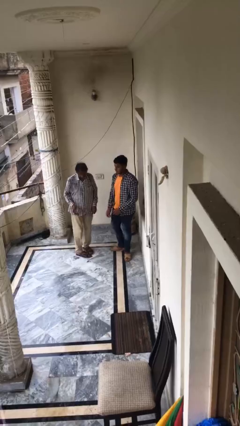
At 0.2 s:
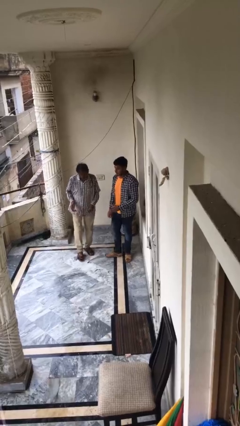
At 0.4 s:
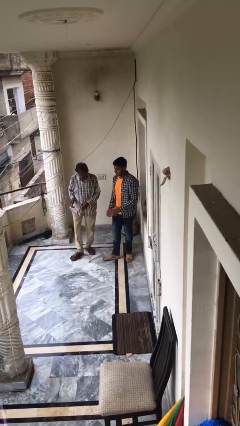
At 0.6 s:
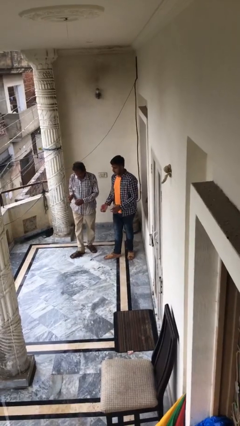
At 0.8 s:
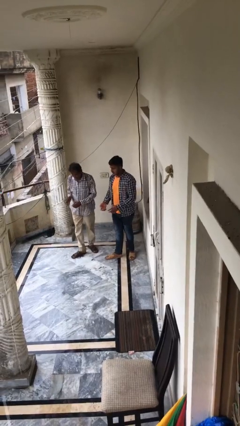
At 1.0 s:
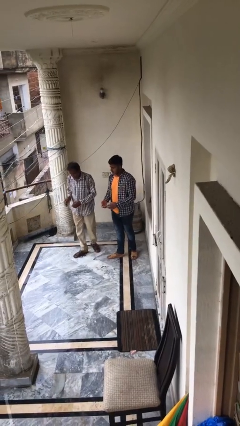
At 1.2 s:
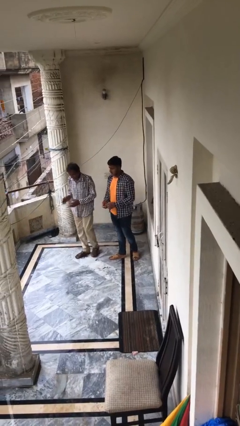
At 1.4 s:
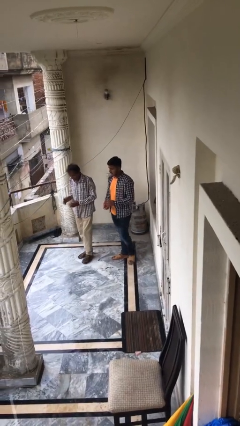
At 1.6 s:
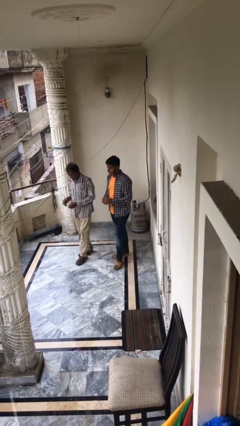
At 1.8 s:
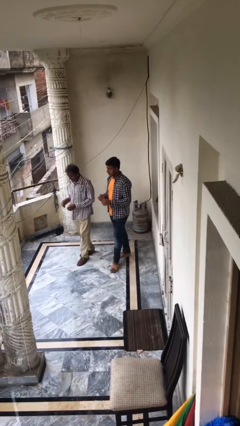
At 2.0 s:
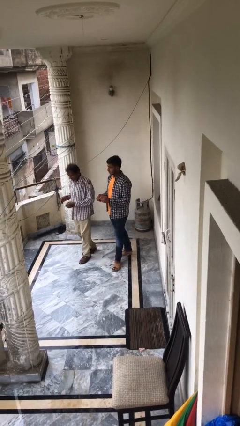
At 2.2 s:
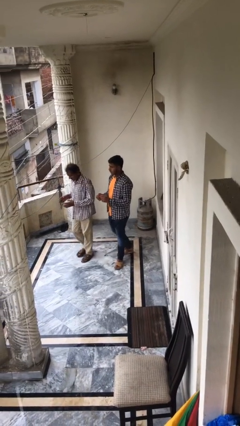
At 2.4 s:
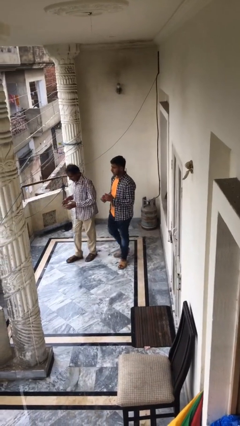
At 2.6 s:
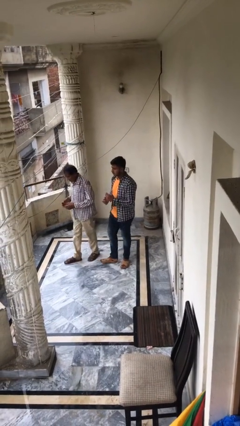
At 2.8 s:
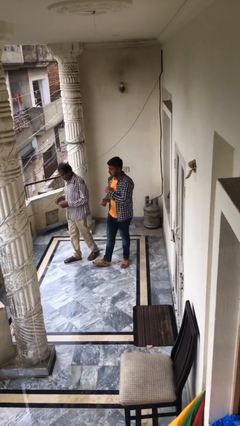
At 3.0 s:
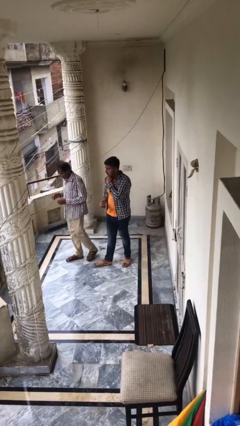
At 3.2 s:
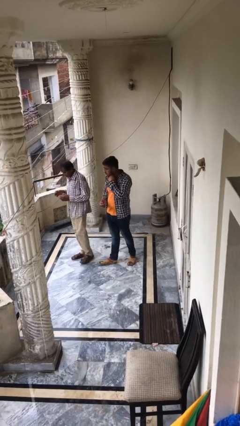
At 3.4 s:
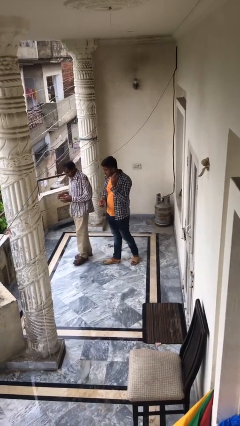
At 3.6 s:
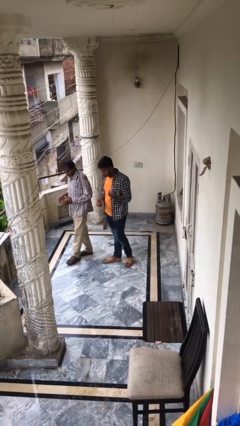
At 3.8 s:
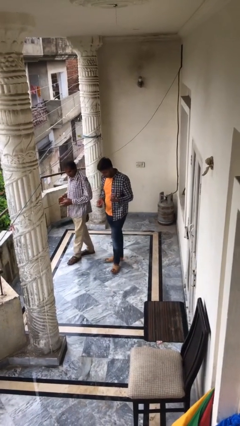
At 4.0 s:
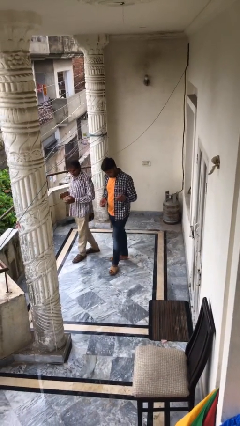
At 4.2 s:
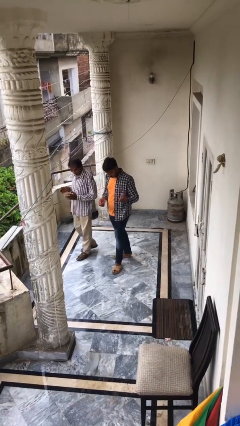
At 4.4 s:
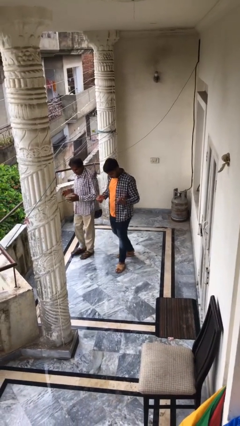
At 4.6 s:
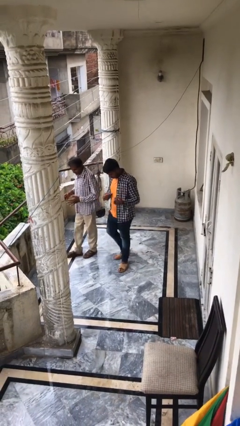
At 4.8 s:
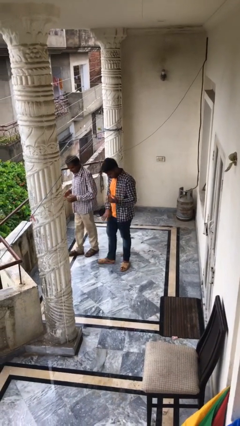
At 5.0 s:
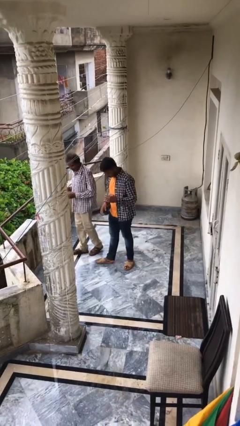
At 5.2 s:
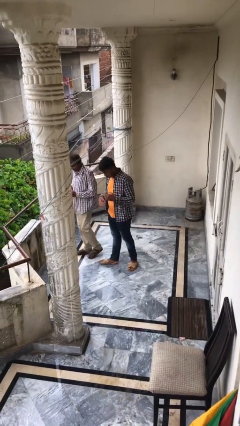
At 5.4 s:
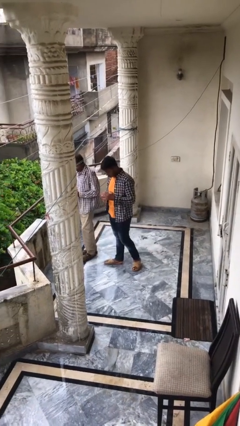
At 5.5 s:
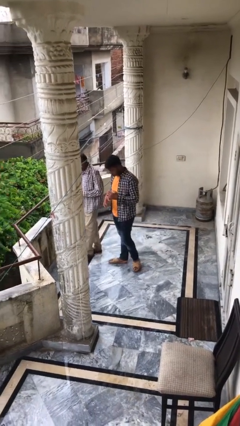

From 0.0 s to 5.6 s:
person talks to person

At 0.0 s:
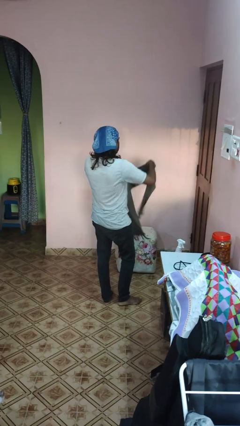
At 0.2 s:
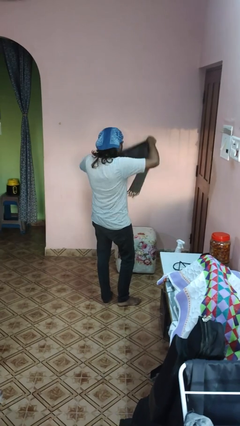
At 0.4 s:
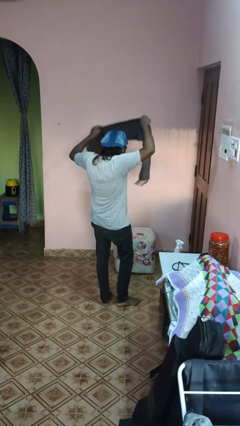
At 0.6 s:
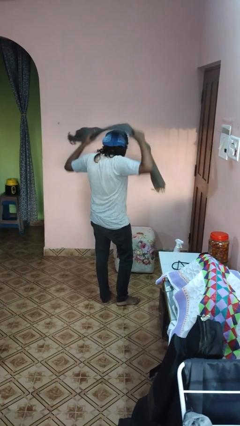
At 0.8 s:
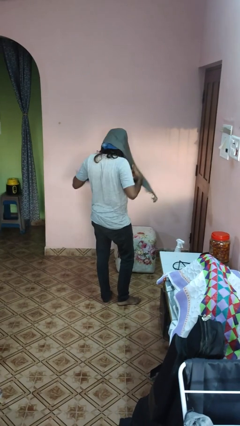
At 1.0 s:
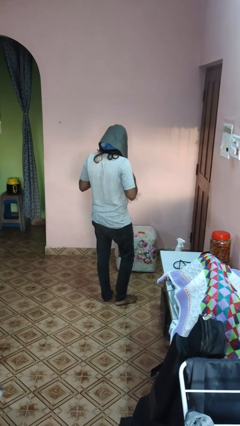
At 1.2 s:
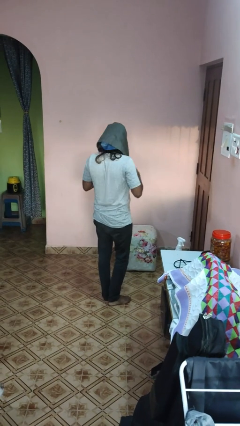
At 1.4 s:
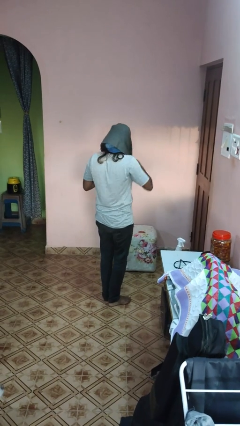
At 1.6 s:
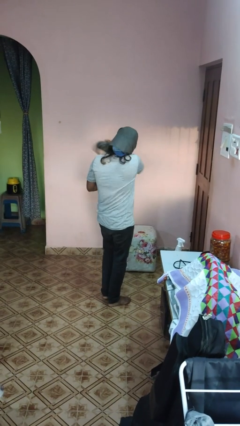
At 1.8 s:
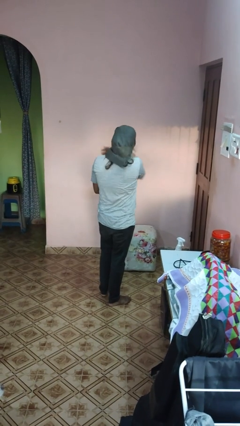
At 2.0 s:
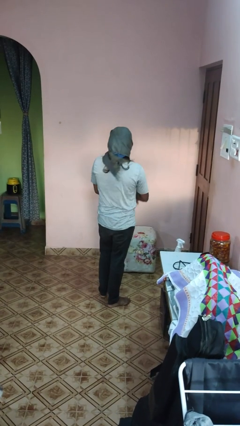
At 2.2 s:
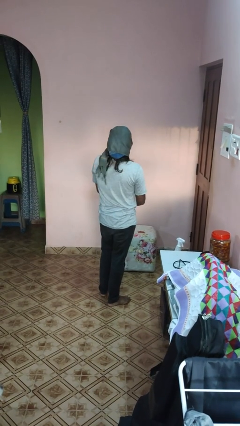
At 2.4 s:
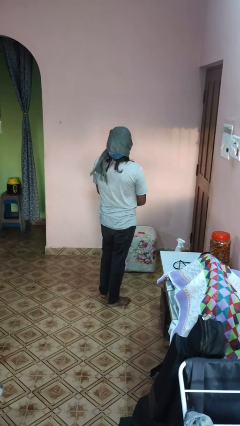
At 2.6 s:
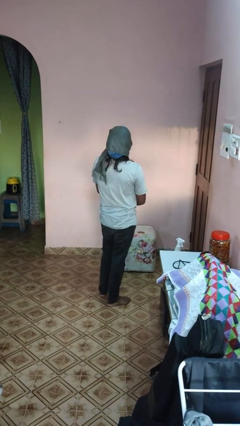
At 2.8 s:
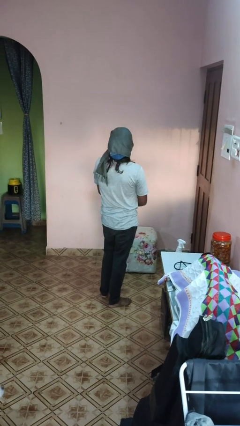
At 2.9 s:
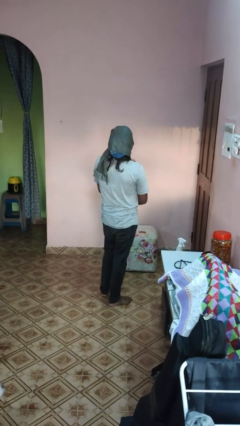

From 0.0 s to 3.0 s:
person puts on scarf

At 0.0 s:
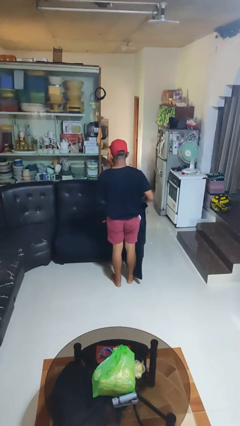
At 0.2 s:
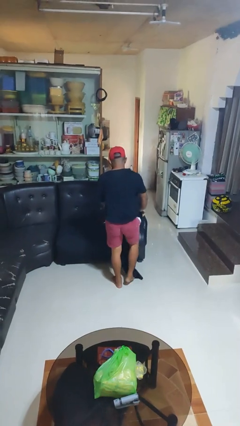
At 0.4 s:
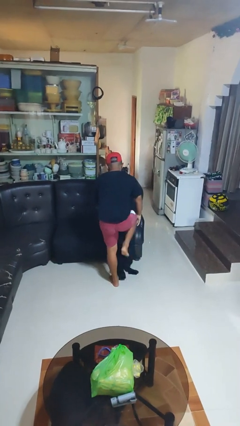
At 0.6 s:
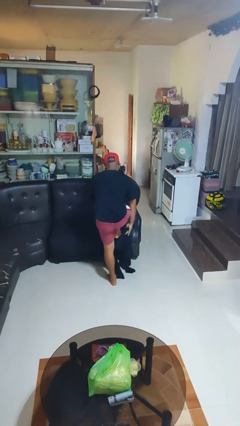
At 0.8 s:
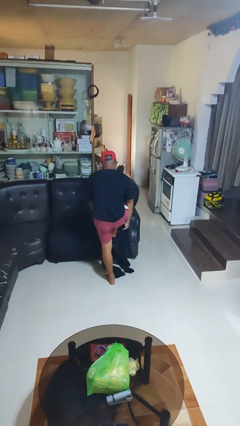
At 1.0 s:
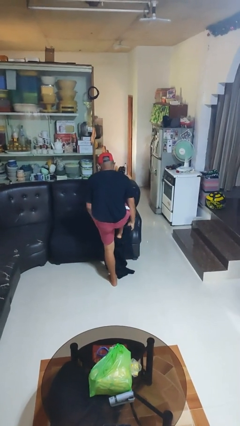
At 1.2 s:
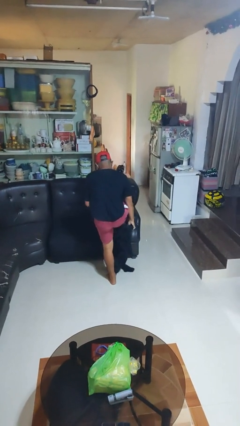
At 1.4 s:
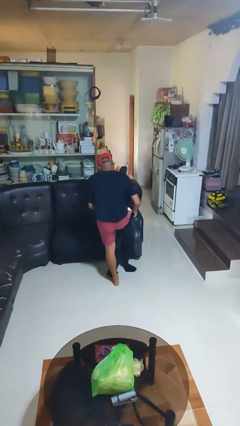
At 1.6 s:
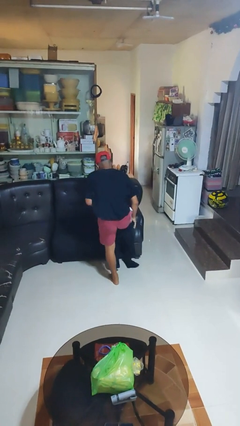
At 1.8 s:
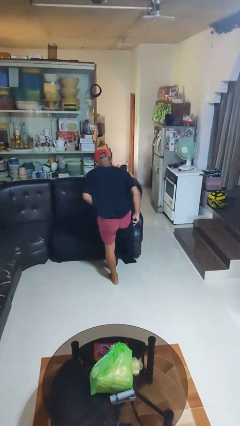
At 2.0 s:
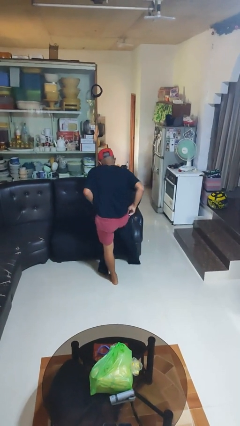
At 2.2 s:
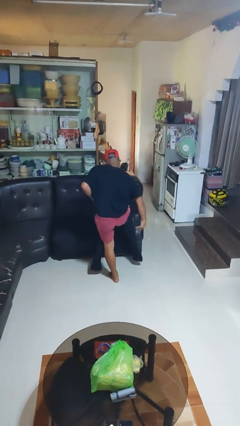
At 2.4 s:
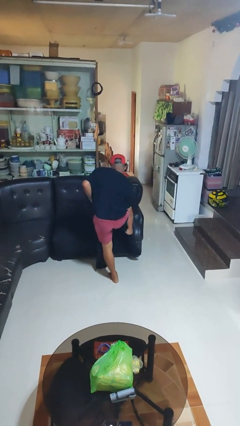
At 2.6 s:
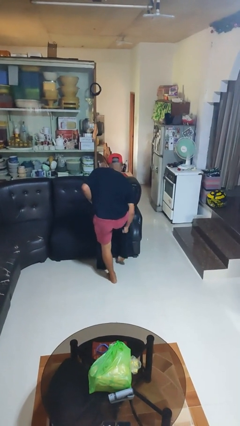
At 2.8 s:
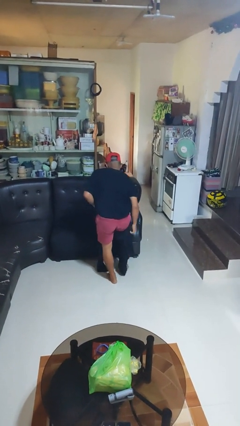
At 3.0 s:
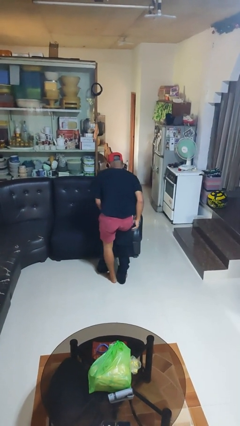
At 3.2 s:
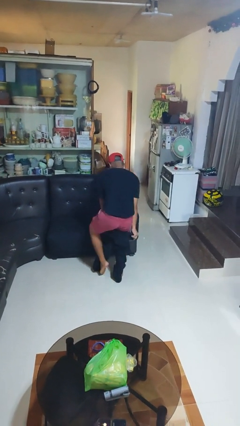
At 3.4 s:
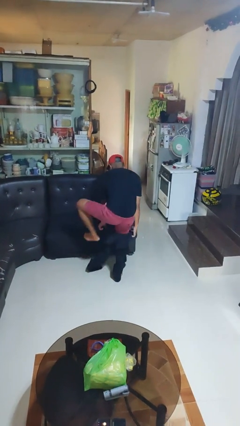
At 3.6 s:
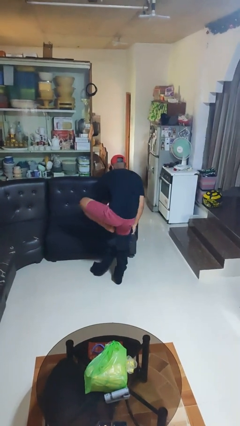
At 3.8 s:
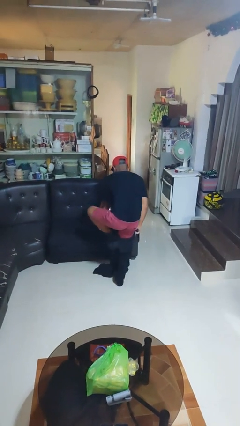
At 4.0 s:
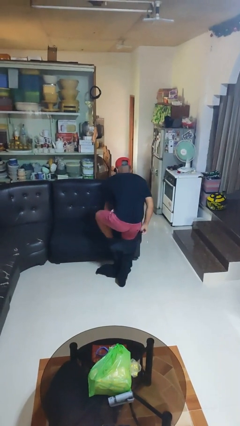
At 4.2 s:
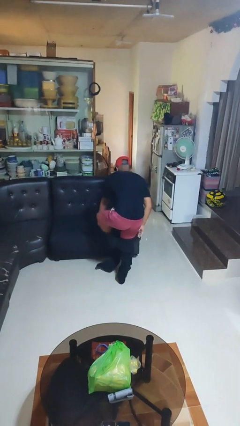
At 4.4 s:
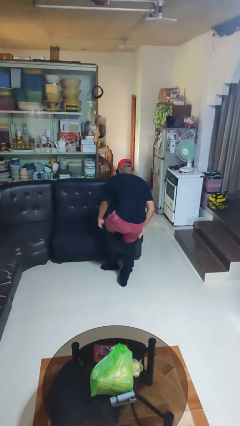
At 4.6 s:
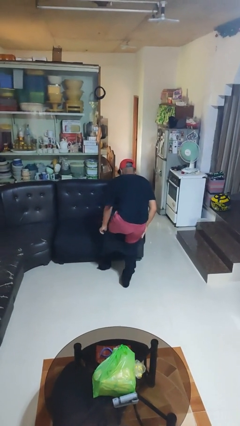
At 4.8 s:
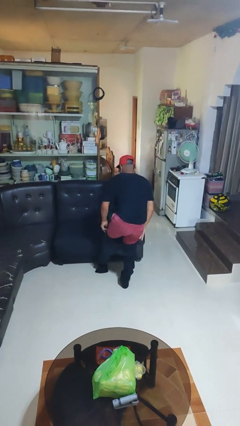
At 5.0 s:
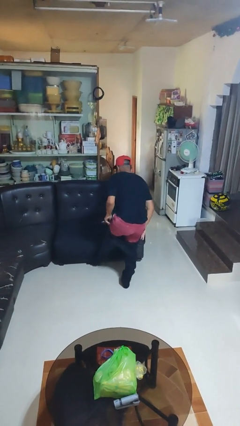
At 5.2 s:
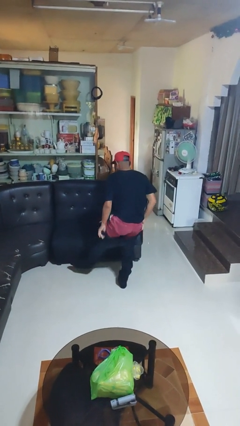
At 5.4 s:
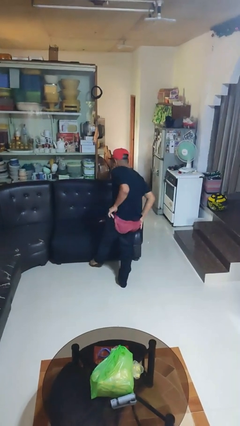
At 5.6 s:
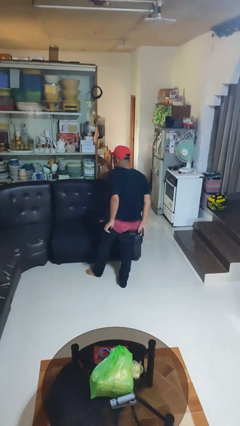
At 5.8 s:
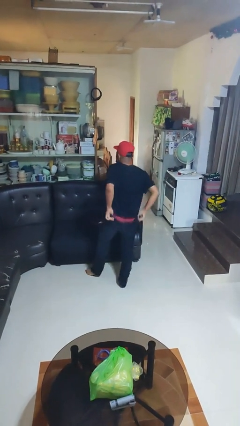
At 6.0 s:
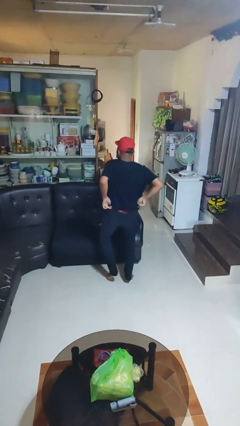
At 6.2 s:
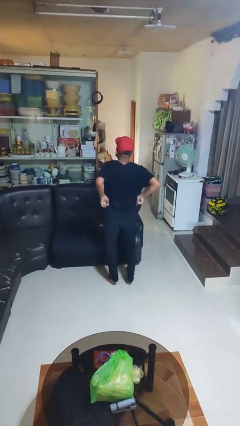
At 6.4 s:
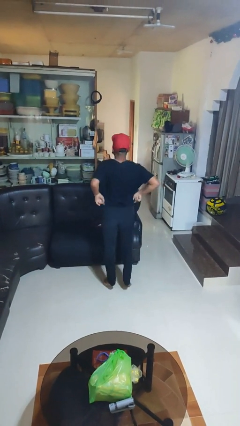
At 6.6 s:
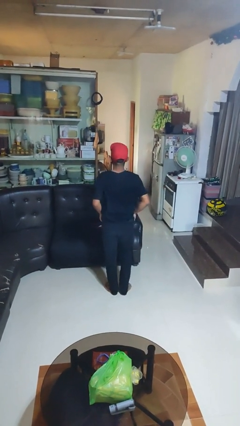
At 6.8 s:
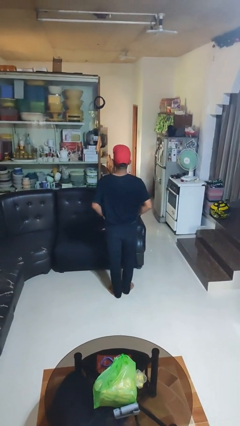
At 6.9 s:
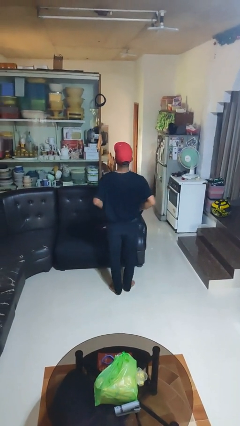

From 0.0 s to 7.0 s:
person puts on pants

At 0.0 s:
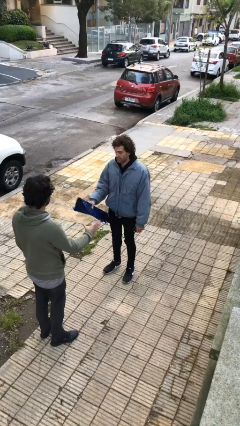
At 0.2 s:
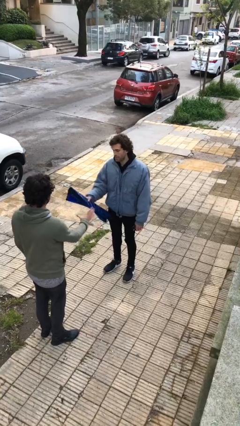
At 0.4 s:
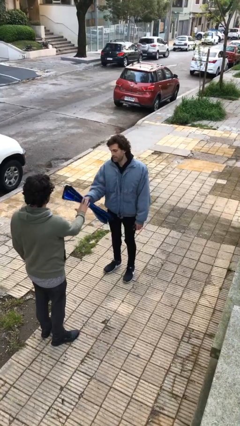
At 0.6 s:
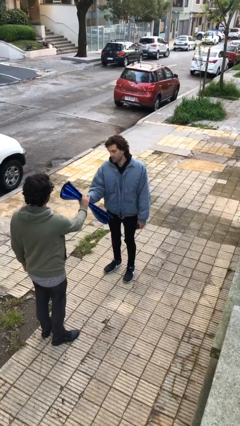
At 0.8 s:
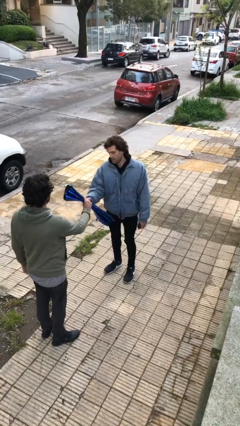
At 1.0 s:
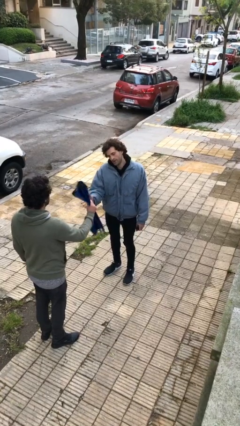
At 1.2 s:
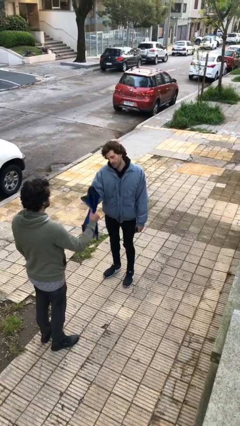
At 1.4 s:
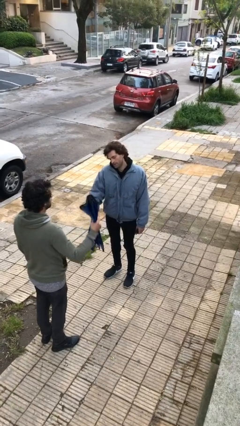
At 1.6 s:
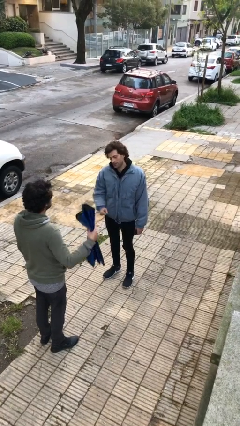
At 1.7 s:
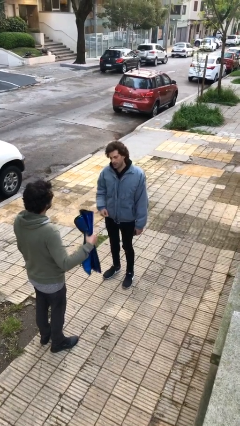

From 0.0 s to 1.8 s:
person transfers object to person

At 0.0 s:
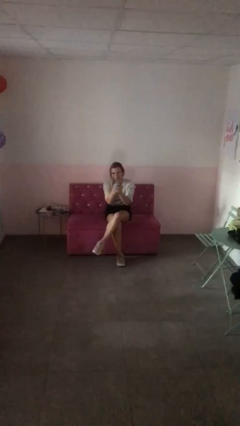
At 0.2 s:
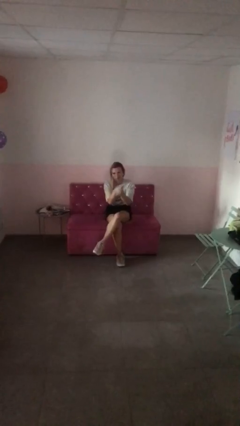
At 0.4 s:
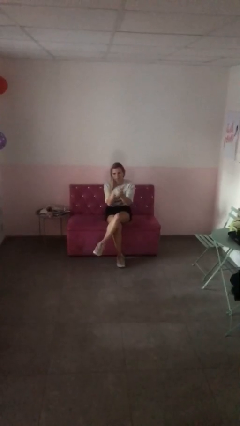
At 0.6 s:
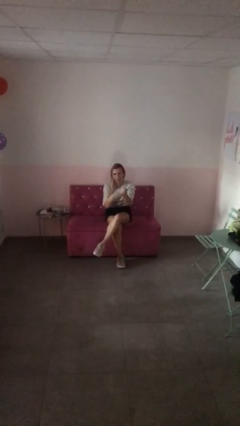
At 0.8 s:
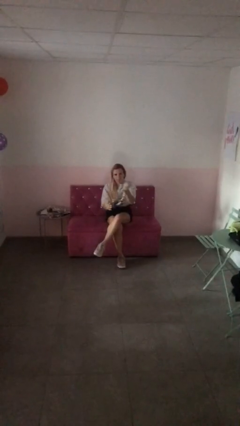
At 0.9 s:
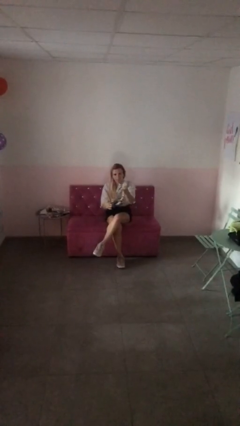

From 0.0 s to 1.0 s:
person takes off gloves
